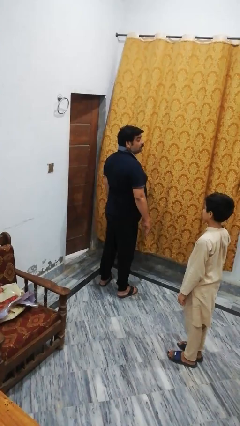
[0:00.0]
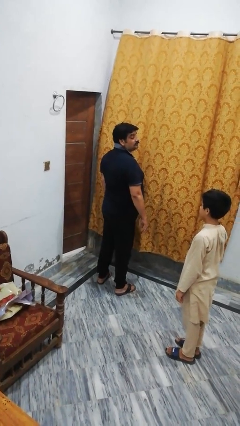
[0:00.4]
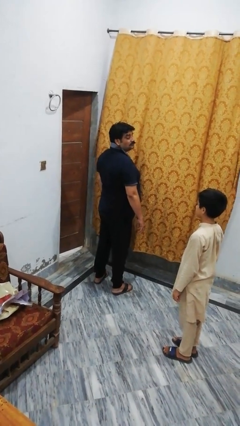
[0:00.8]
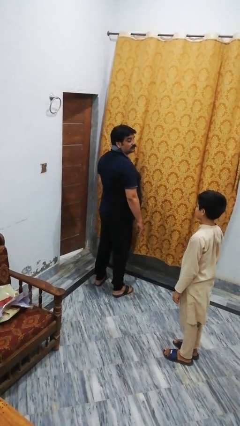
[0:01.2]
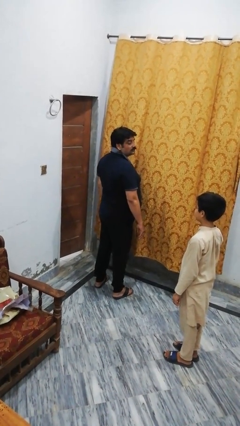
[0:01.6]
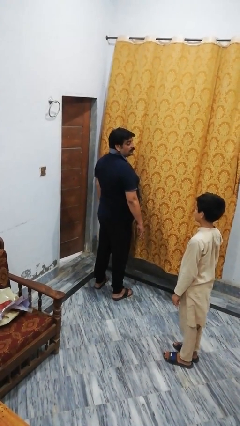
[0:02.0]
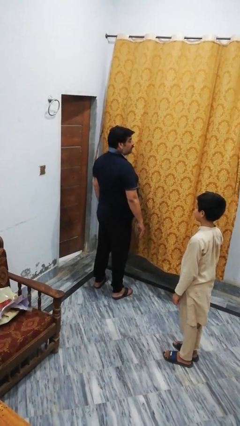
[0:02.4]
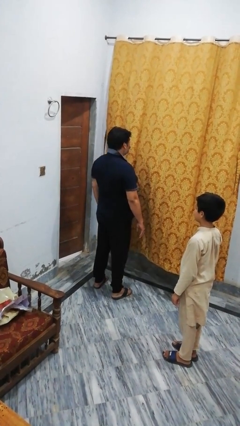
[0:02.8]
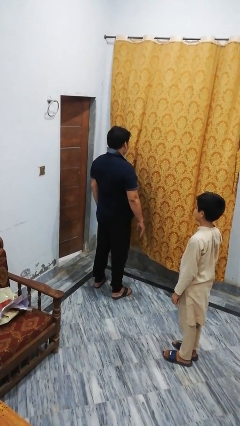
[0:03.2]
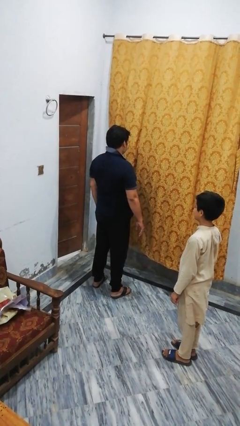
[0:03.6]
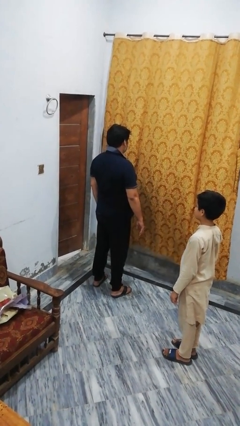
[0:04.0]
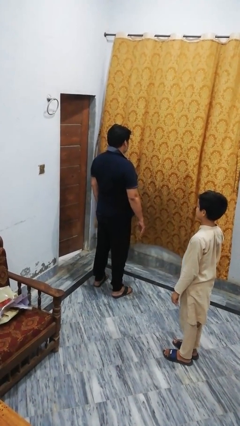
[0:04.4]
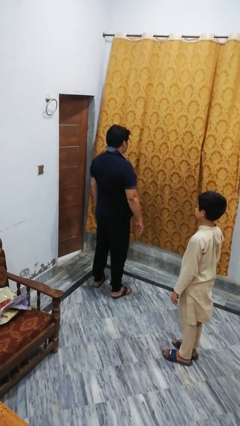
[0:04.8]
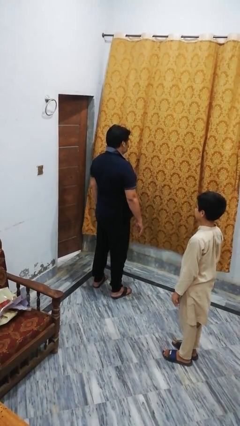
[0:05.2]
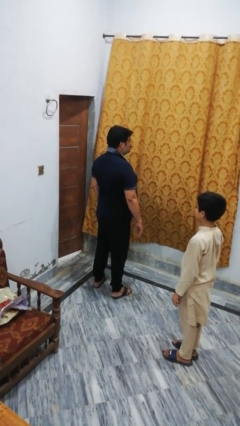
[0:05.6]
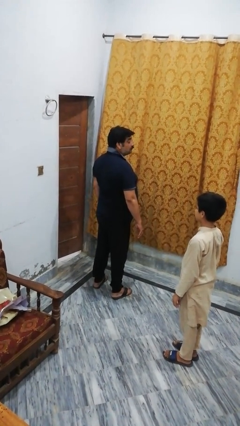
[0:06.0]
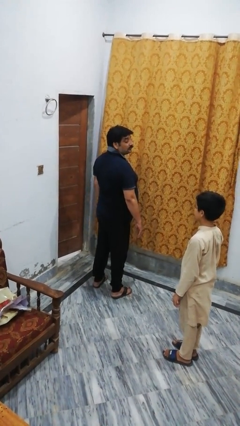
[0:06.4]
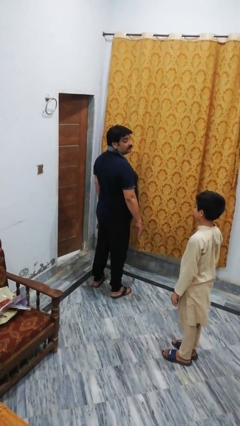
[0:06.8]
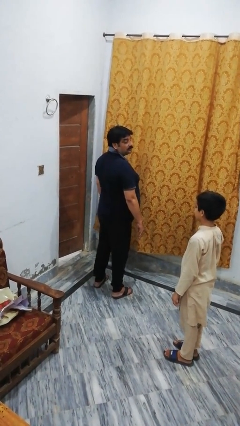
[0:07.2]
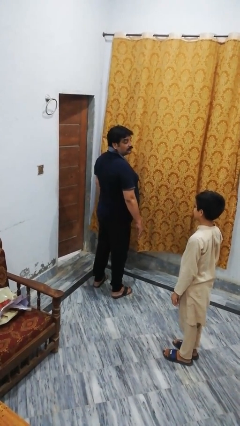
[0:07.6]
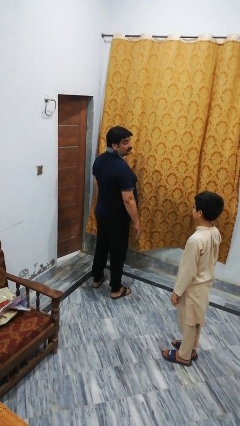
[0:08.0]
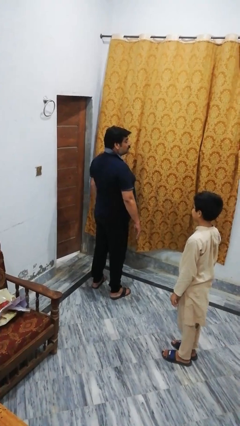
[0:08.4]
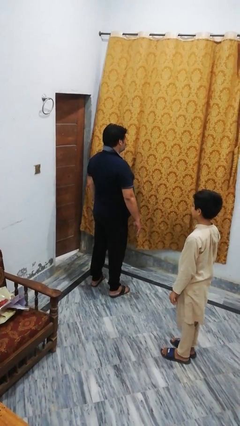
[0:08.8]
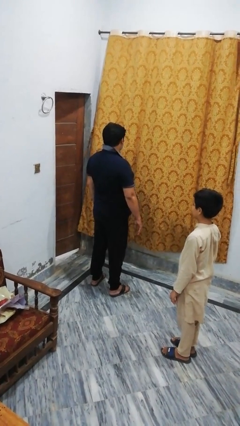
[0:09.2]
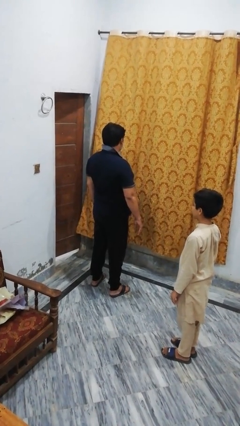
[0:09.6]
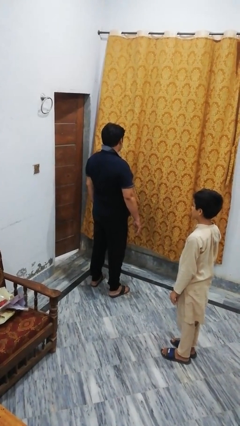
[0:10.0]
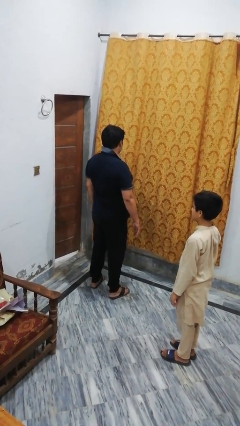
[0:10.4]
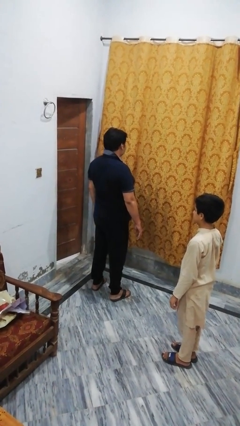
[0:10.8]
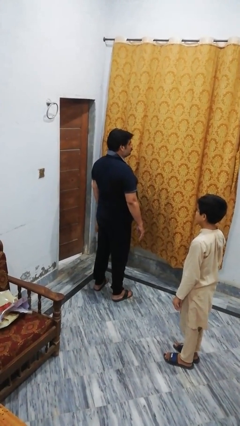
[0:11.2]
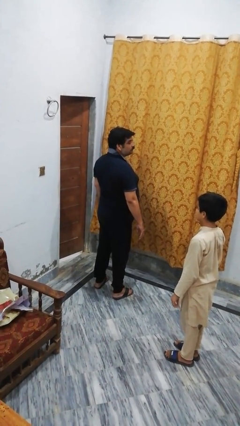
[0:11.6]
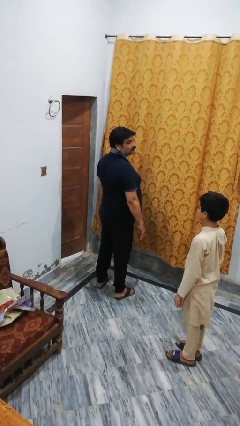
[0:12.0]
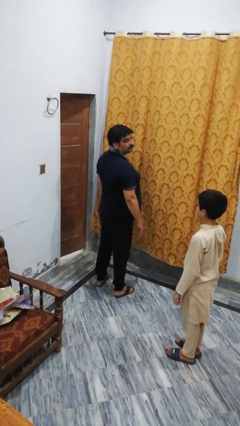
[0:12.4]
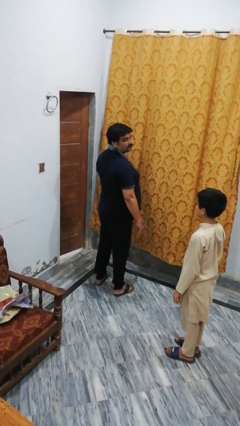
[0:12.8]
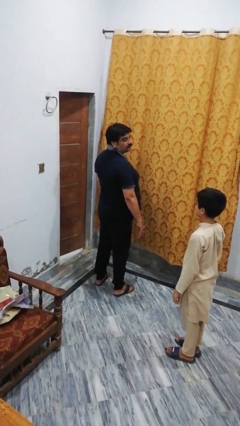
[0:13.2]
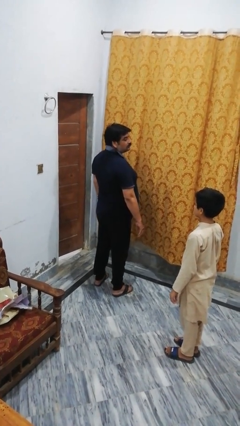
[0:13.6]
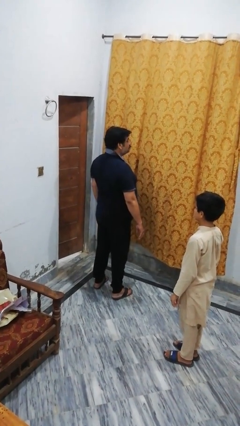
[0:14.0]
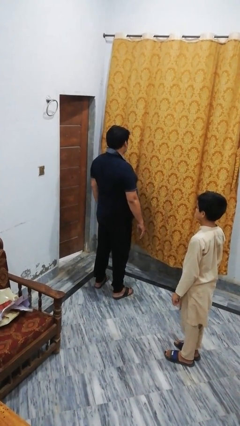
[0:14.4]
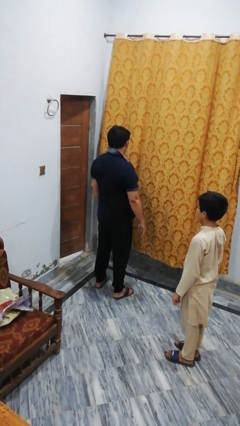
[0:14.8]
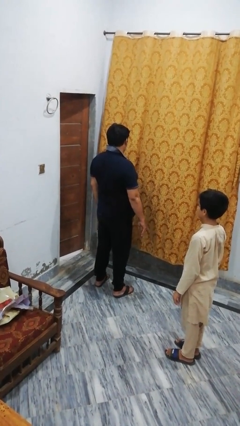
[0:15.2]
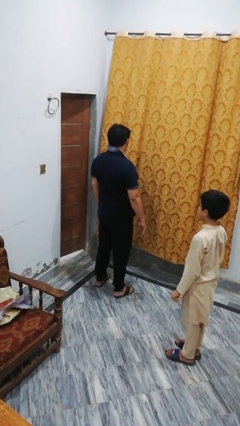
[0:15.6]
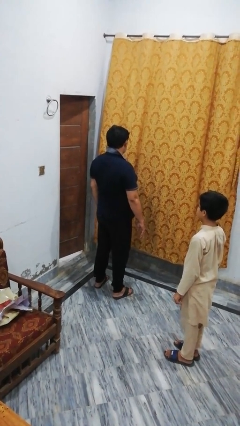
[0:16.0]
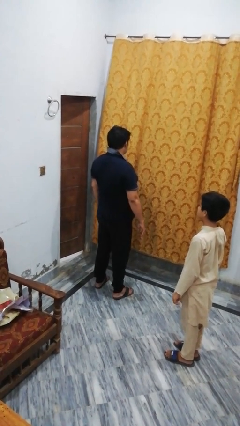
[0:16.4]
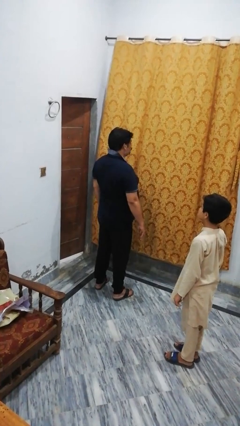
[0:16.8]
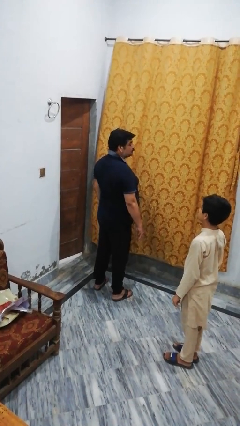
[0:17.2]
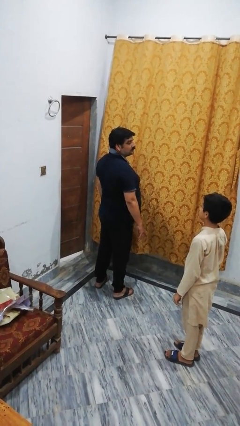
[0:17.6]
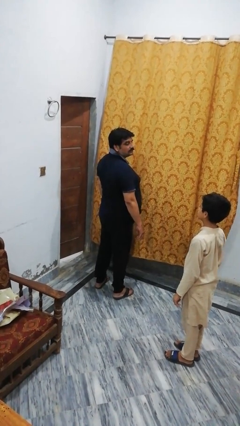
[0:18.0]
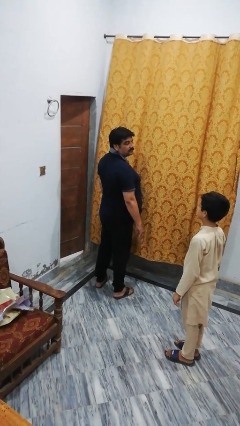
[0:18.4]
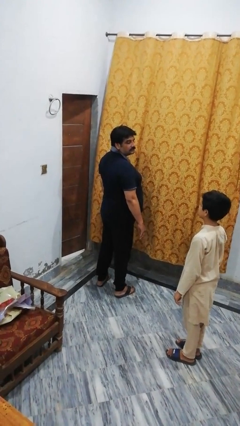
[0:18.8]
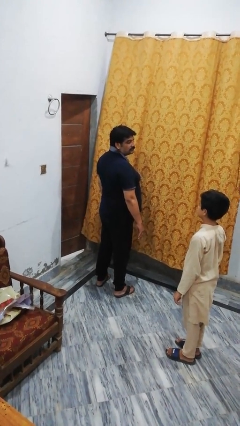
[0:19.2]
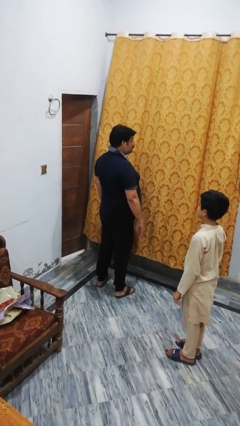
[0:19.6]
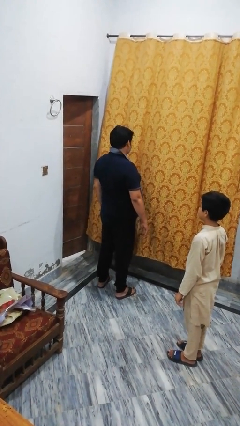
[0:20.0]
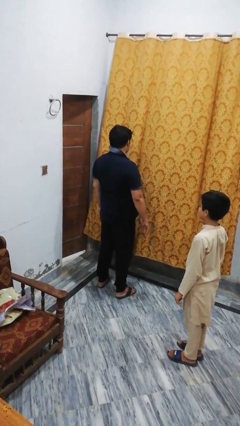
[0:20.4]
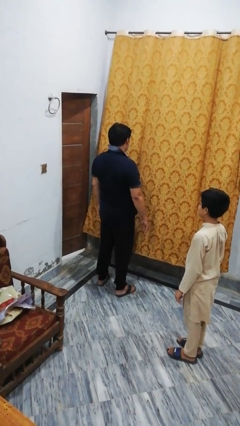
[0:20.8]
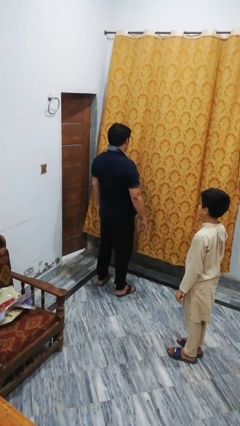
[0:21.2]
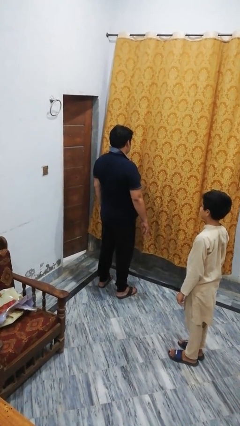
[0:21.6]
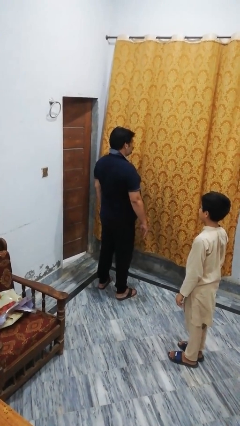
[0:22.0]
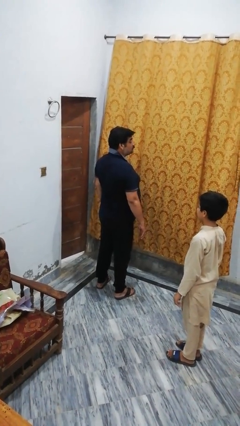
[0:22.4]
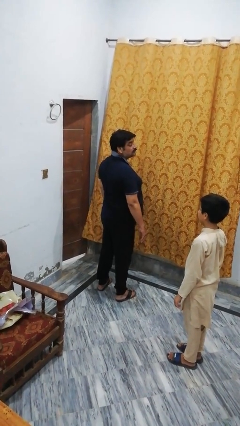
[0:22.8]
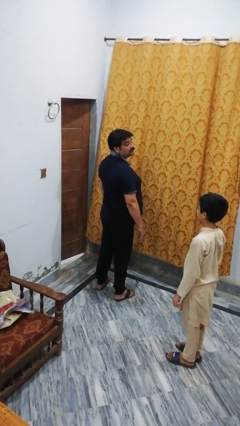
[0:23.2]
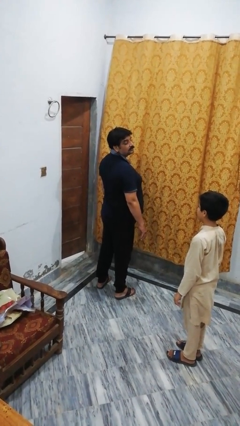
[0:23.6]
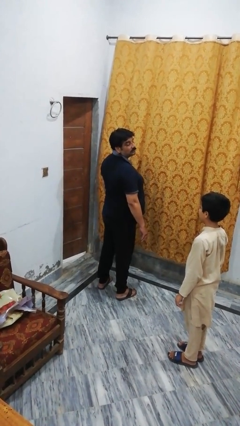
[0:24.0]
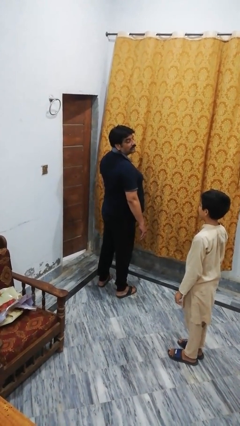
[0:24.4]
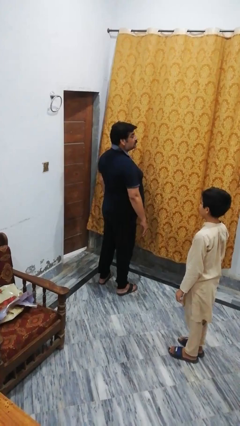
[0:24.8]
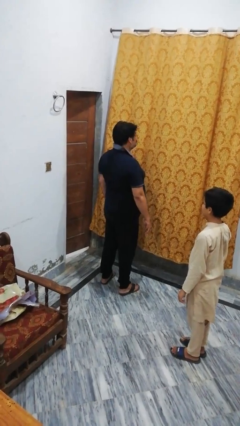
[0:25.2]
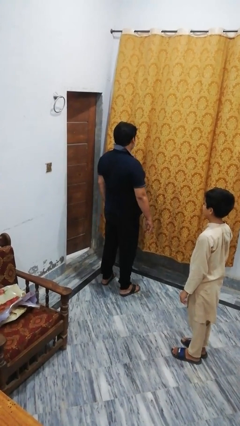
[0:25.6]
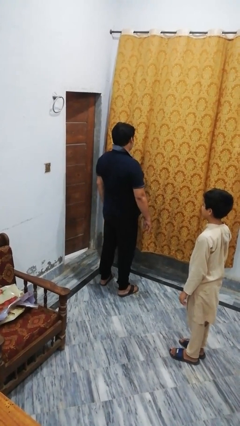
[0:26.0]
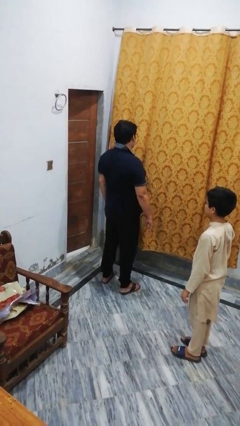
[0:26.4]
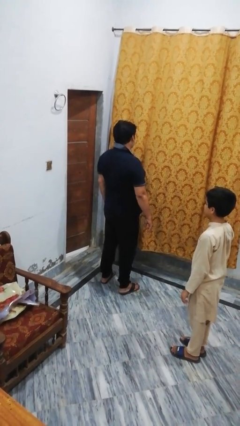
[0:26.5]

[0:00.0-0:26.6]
person looks over shoulder

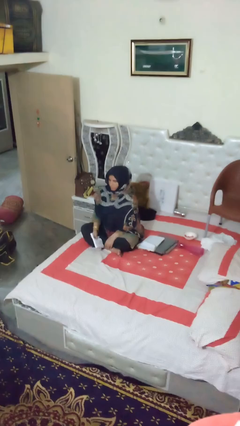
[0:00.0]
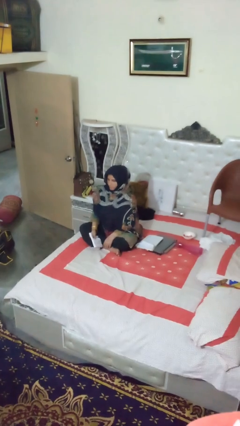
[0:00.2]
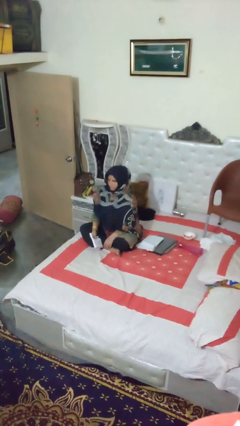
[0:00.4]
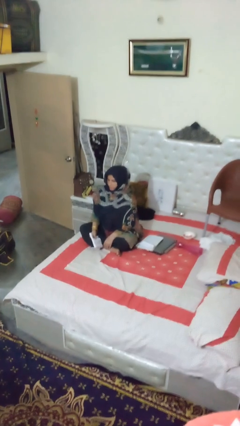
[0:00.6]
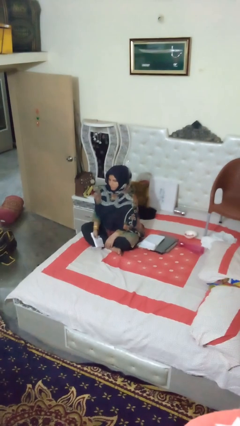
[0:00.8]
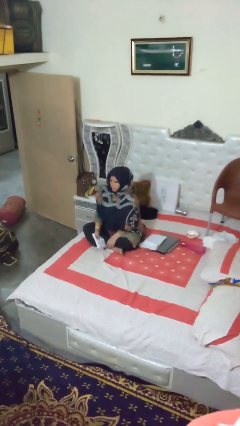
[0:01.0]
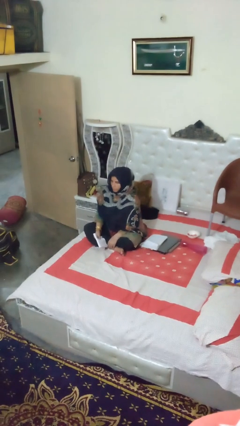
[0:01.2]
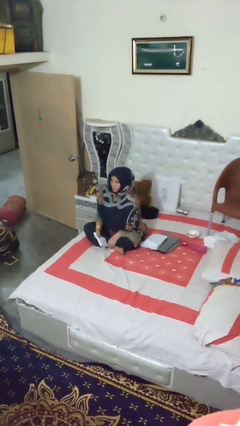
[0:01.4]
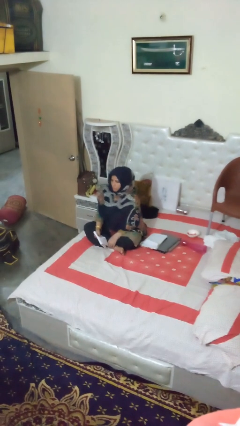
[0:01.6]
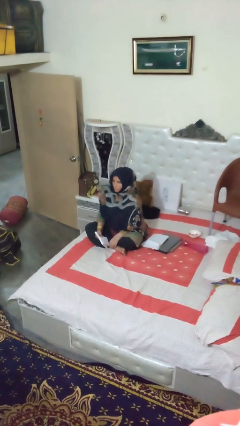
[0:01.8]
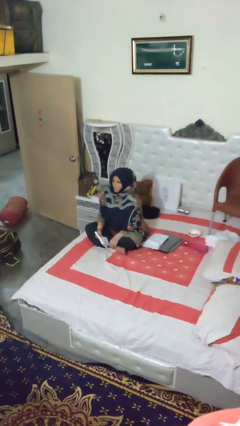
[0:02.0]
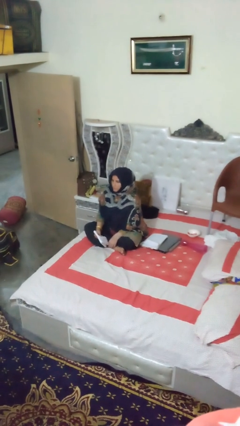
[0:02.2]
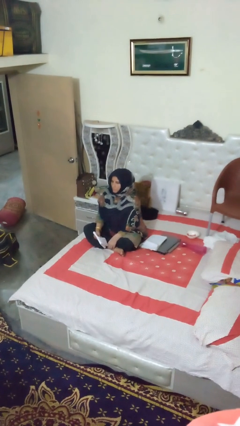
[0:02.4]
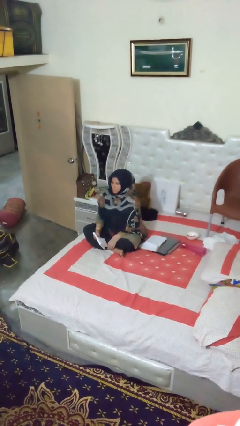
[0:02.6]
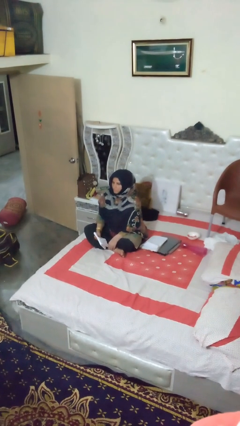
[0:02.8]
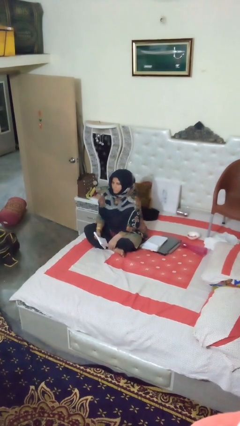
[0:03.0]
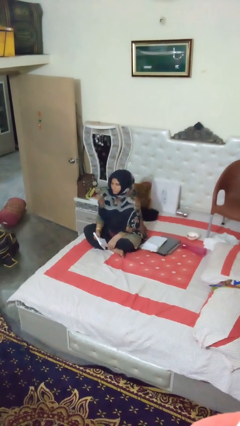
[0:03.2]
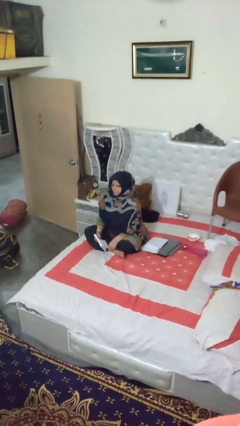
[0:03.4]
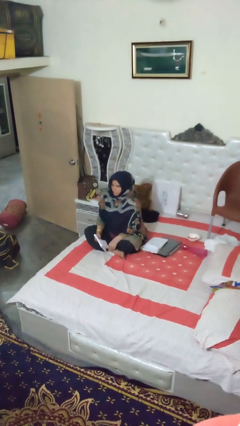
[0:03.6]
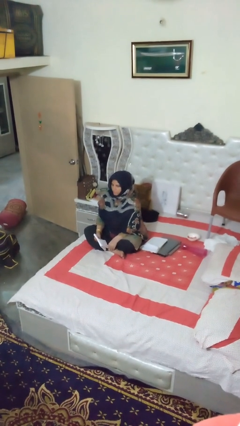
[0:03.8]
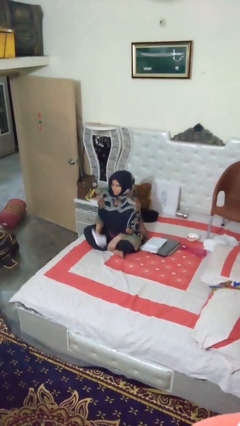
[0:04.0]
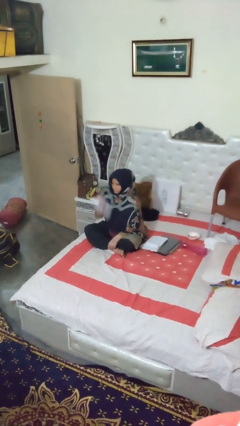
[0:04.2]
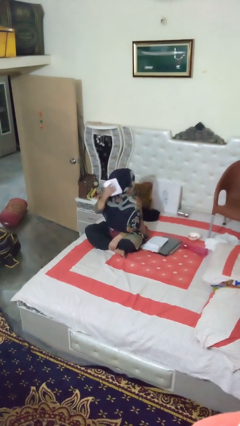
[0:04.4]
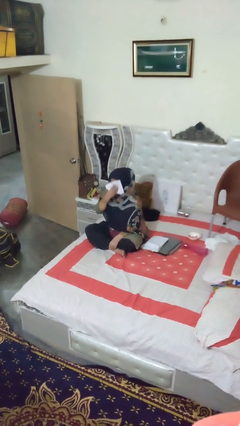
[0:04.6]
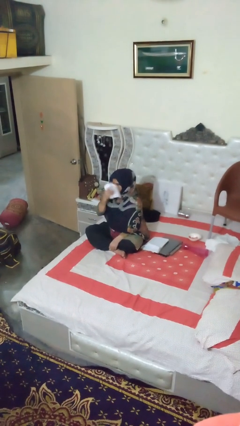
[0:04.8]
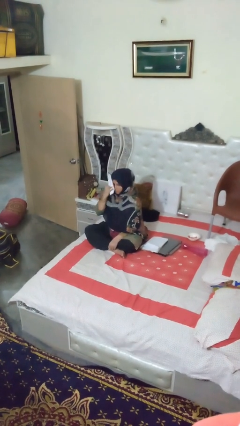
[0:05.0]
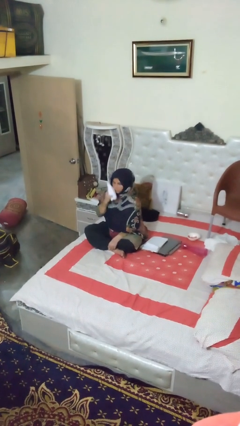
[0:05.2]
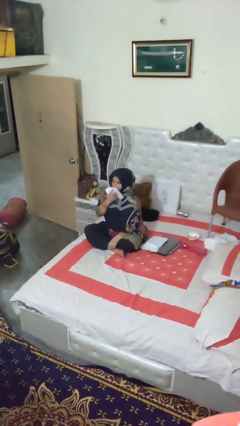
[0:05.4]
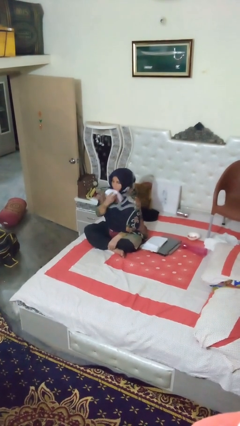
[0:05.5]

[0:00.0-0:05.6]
person wipes mouth with napkin
